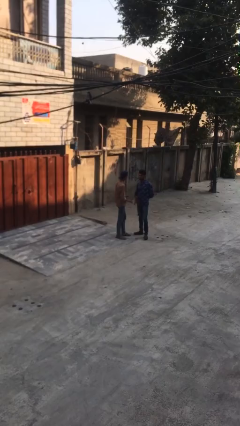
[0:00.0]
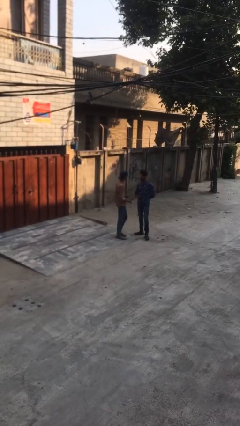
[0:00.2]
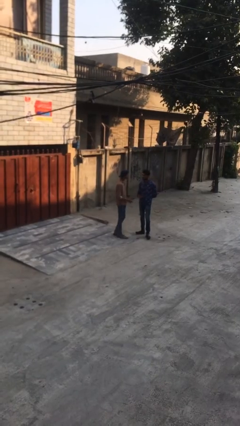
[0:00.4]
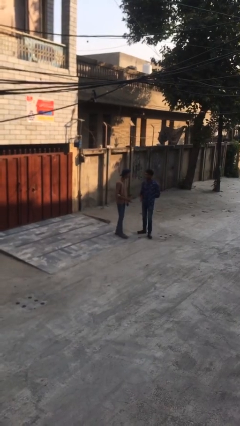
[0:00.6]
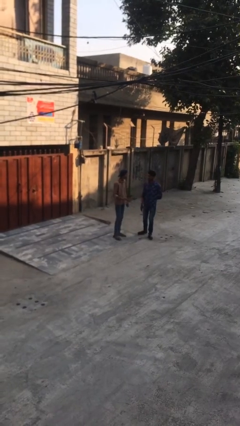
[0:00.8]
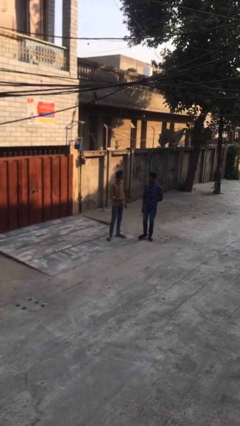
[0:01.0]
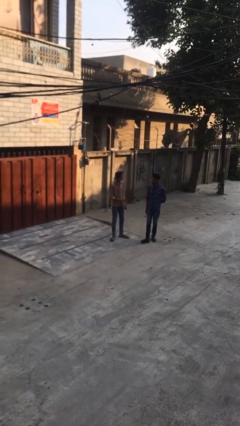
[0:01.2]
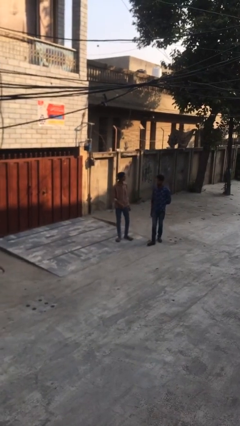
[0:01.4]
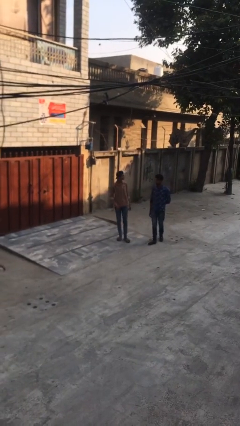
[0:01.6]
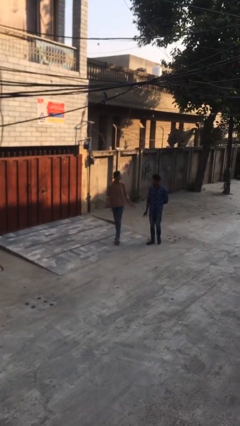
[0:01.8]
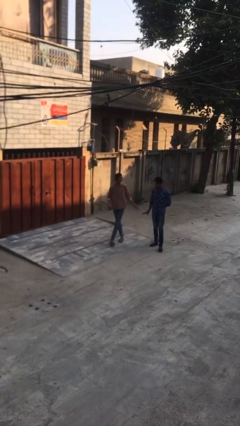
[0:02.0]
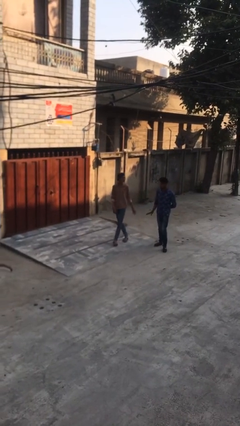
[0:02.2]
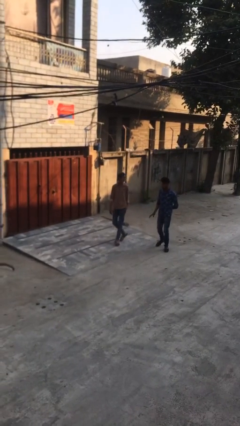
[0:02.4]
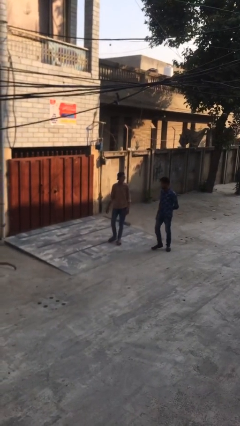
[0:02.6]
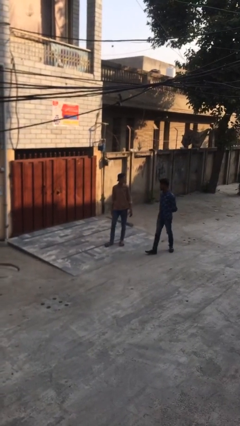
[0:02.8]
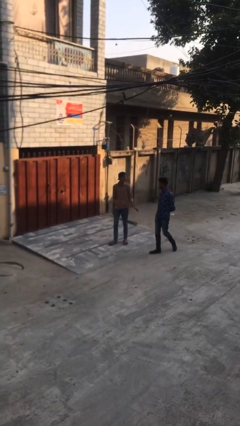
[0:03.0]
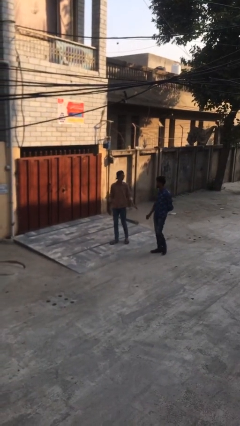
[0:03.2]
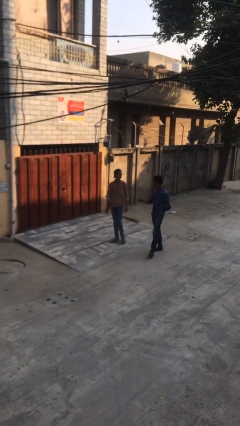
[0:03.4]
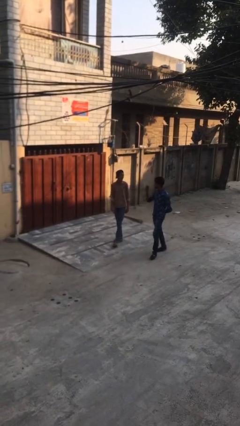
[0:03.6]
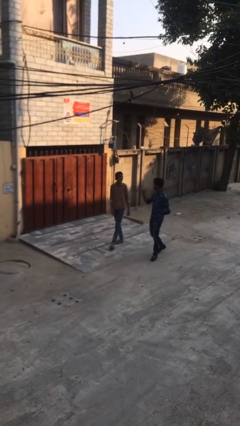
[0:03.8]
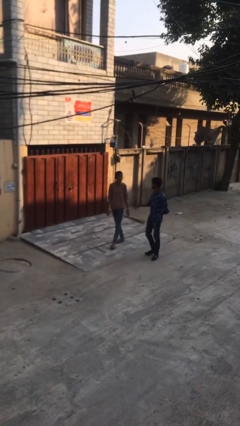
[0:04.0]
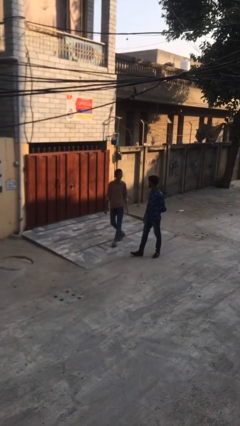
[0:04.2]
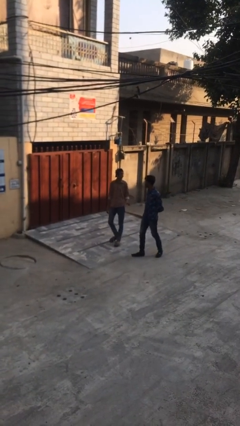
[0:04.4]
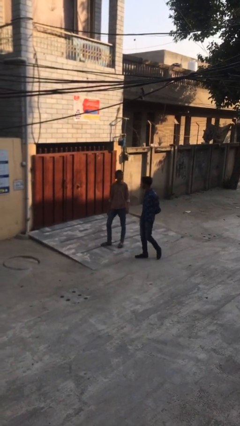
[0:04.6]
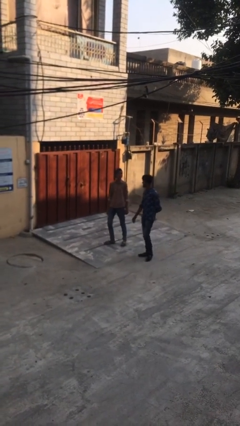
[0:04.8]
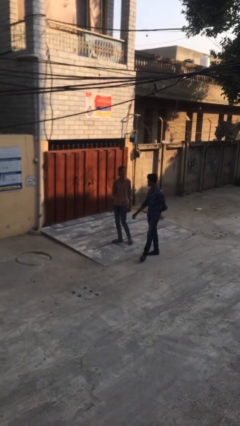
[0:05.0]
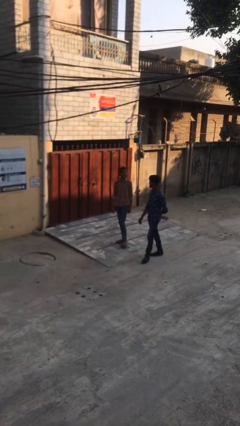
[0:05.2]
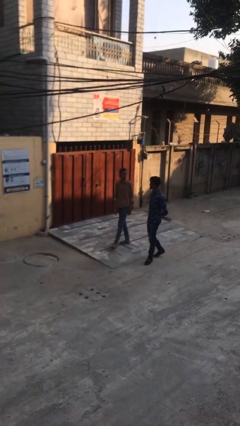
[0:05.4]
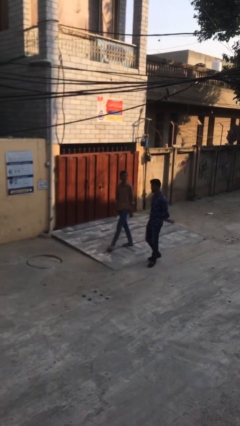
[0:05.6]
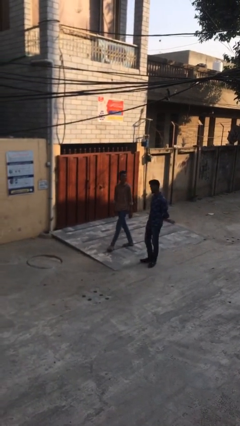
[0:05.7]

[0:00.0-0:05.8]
person talks to person

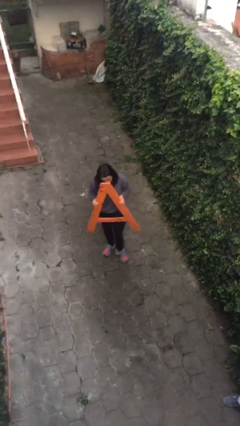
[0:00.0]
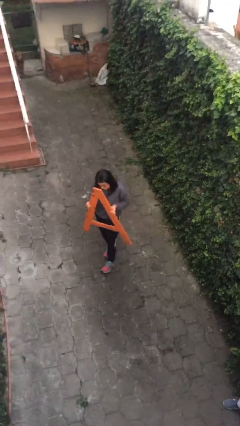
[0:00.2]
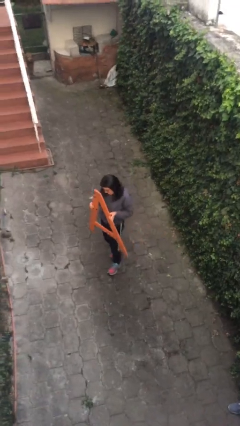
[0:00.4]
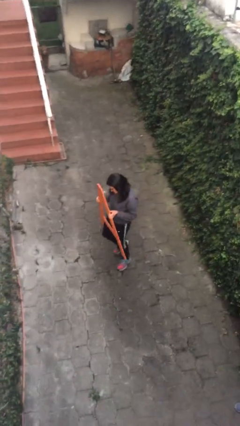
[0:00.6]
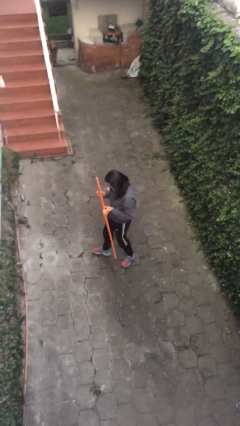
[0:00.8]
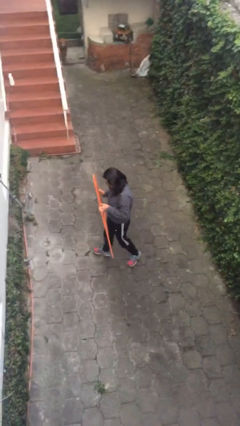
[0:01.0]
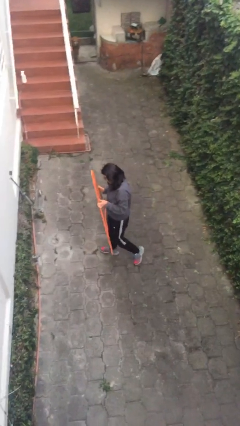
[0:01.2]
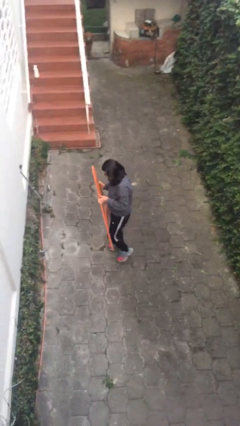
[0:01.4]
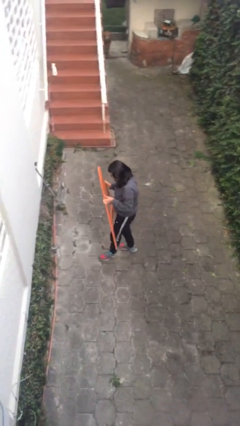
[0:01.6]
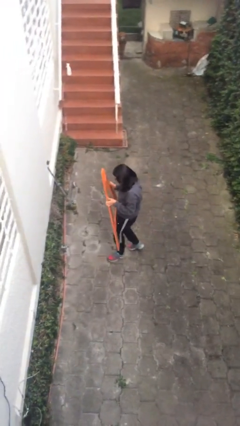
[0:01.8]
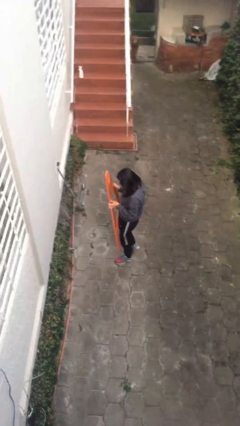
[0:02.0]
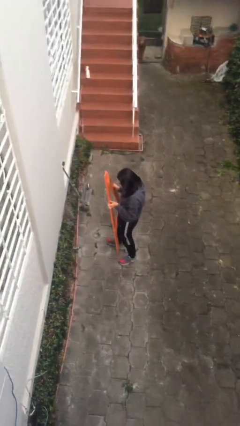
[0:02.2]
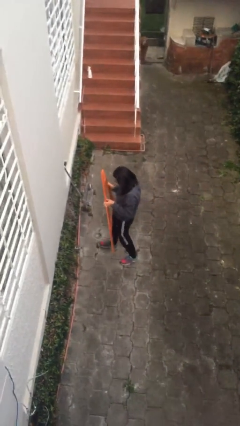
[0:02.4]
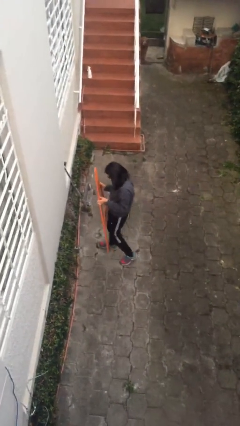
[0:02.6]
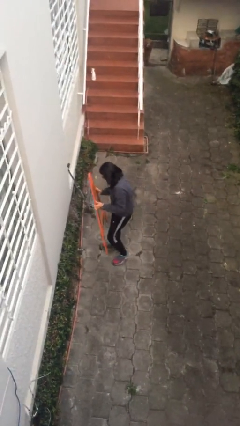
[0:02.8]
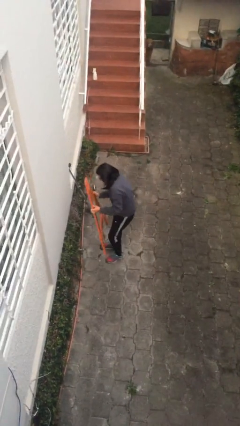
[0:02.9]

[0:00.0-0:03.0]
person carries heavy object

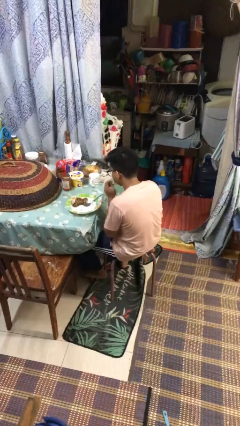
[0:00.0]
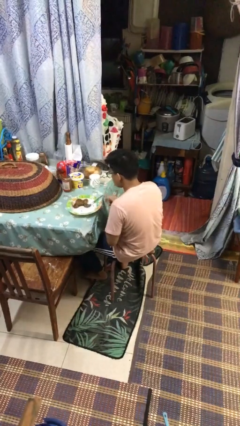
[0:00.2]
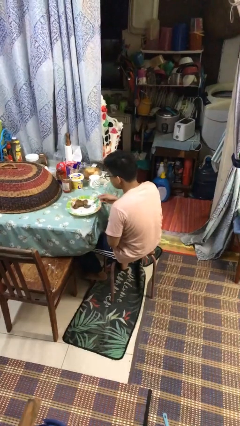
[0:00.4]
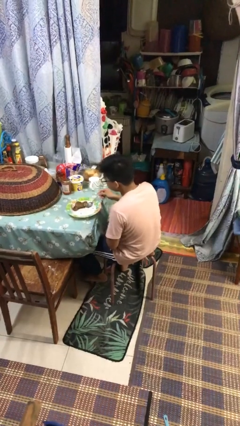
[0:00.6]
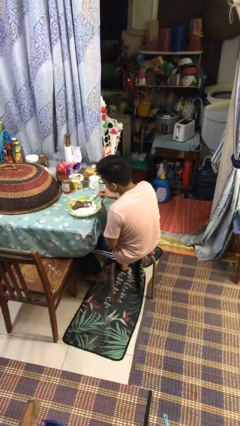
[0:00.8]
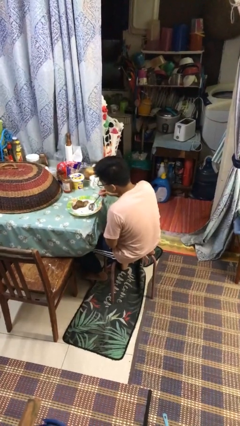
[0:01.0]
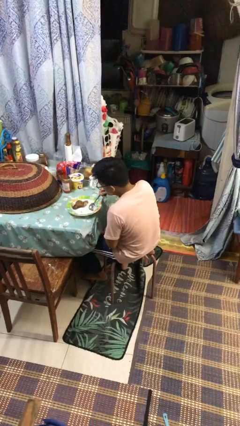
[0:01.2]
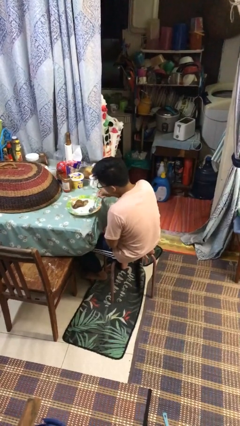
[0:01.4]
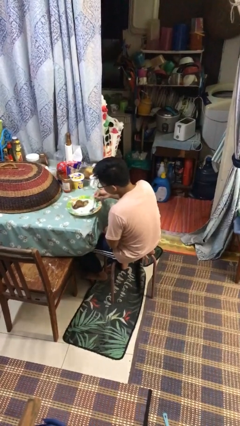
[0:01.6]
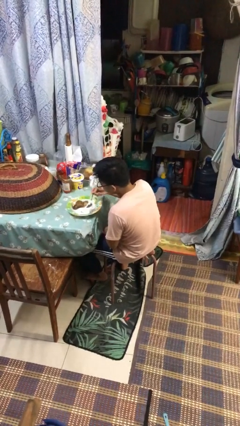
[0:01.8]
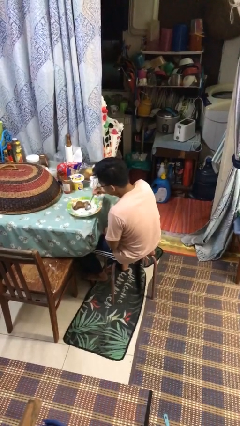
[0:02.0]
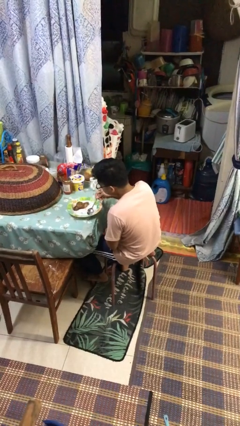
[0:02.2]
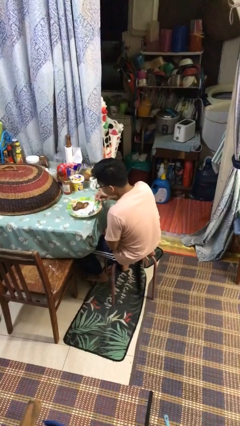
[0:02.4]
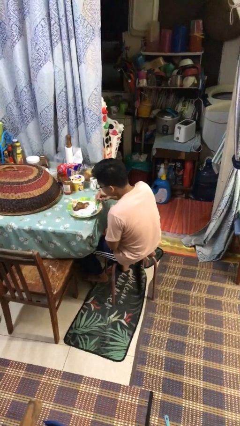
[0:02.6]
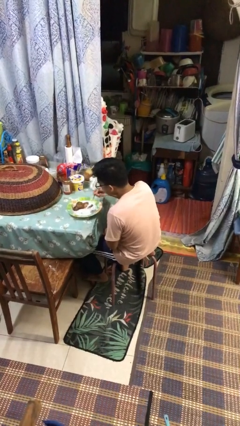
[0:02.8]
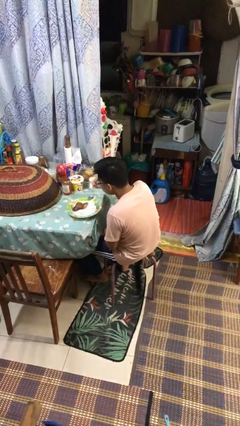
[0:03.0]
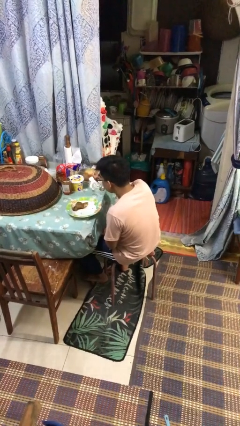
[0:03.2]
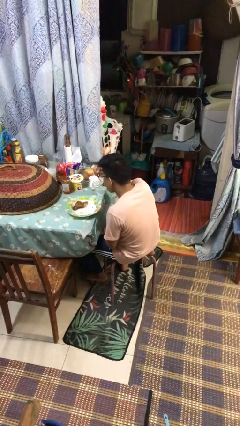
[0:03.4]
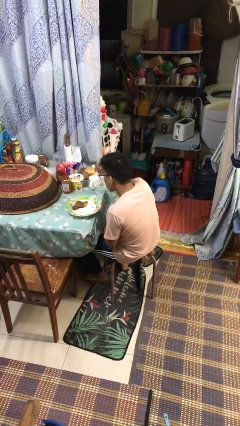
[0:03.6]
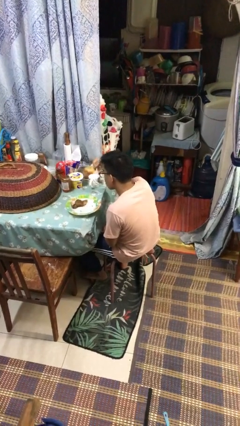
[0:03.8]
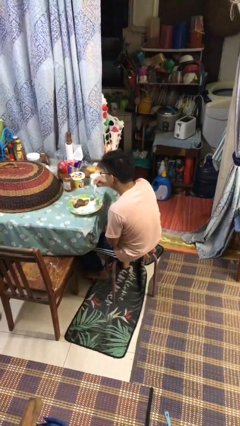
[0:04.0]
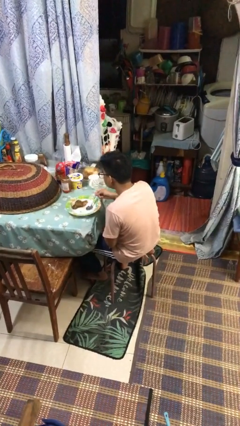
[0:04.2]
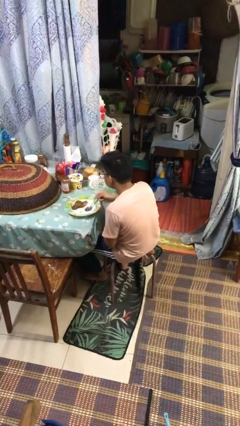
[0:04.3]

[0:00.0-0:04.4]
person eats with utensil

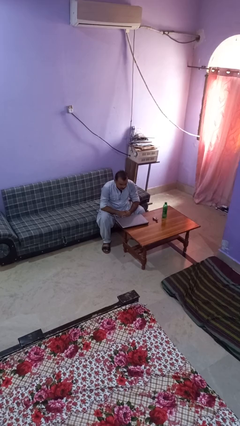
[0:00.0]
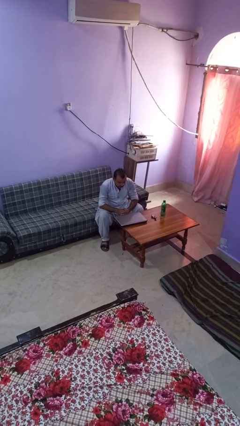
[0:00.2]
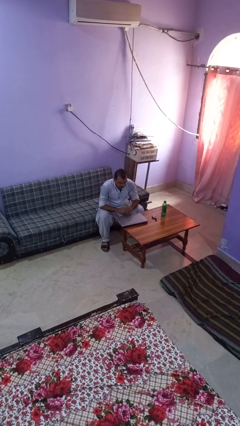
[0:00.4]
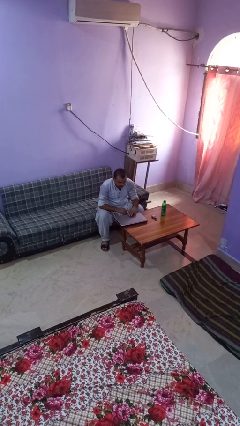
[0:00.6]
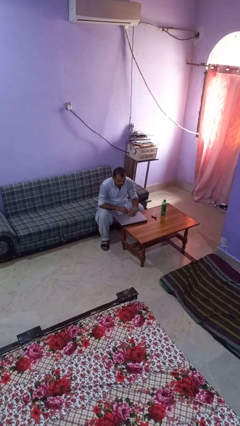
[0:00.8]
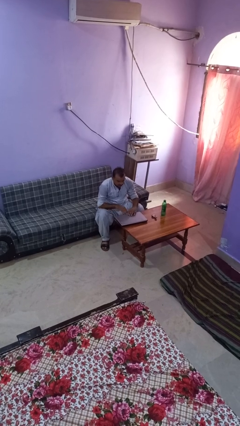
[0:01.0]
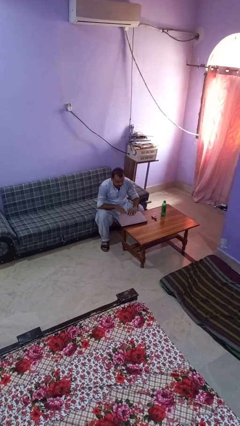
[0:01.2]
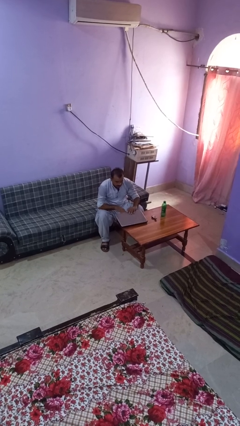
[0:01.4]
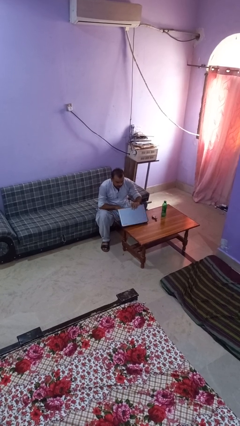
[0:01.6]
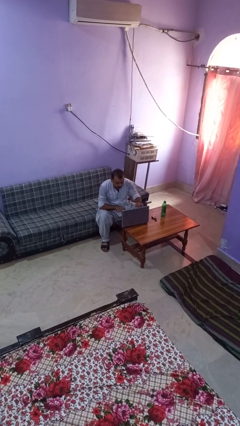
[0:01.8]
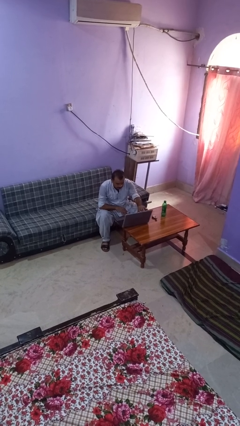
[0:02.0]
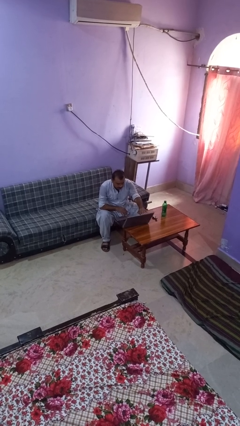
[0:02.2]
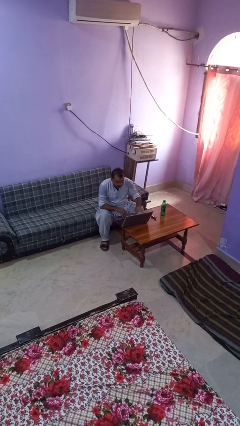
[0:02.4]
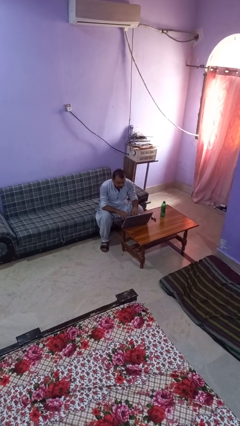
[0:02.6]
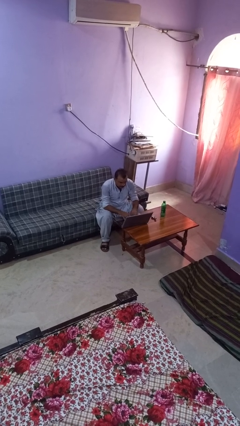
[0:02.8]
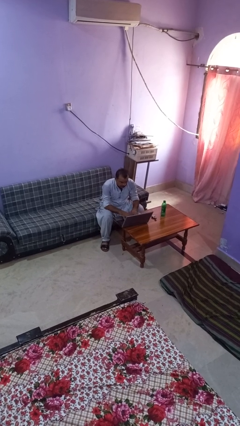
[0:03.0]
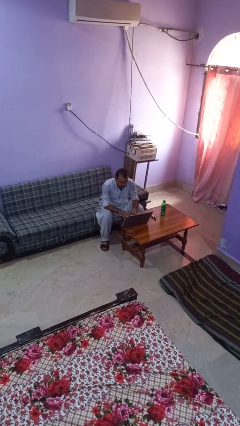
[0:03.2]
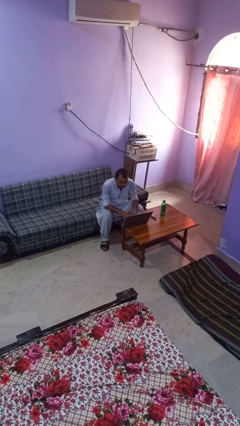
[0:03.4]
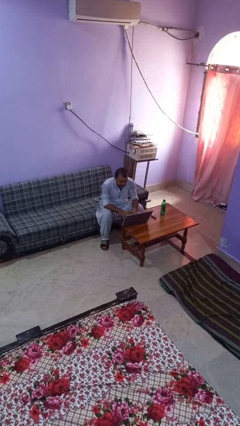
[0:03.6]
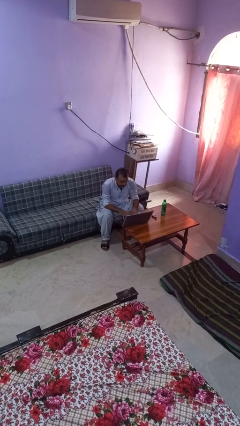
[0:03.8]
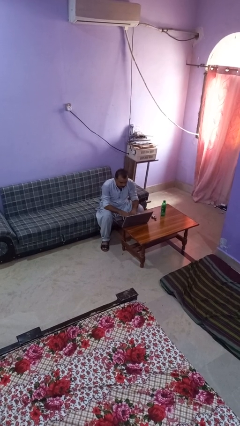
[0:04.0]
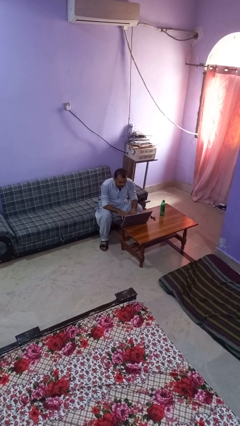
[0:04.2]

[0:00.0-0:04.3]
person opens laptop
